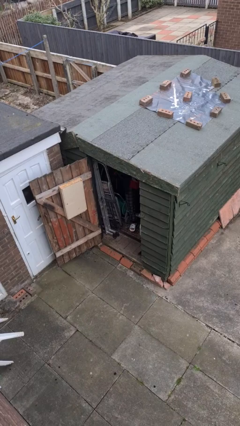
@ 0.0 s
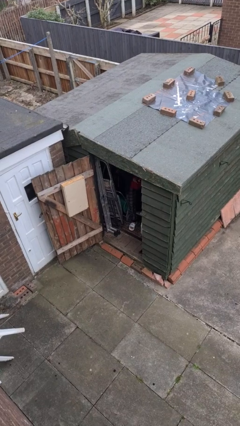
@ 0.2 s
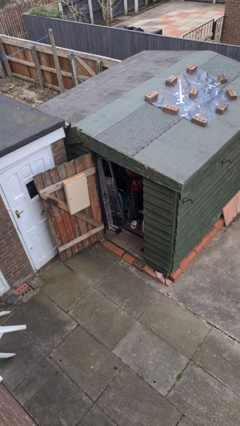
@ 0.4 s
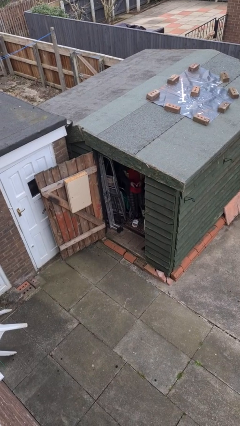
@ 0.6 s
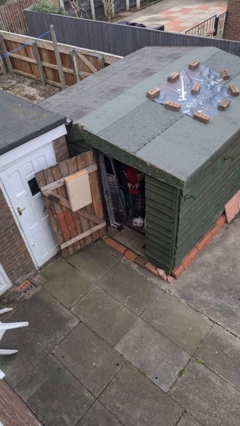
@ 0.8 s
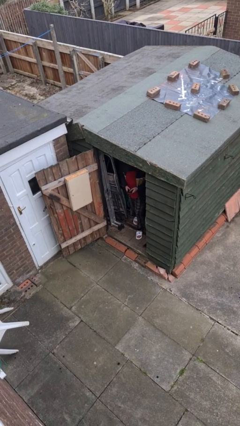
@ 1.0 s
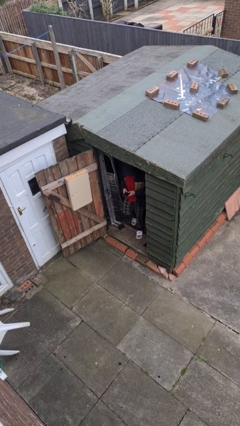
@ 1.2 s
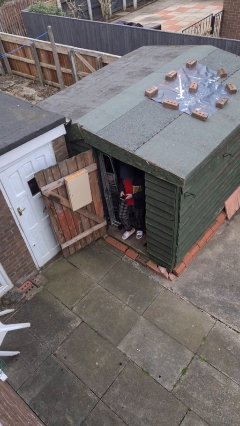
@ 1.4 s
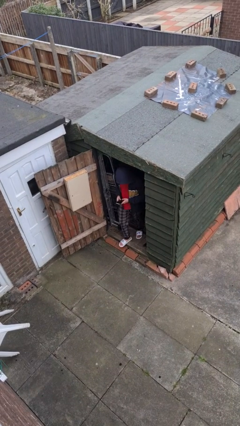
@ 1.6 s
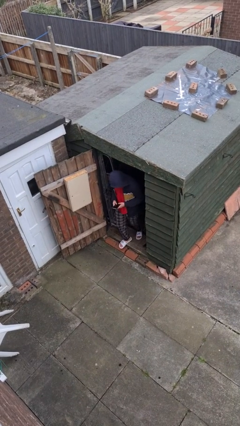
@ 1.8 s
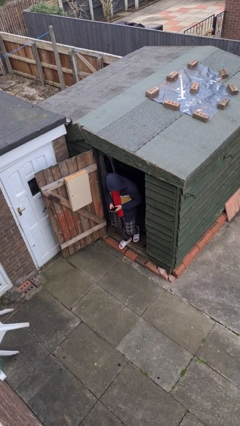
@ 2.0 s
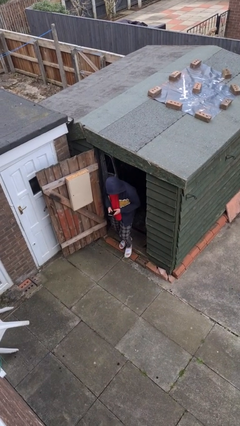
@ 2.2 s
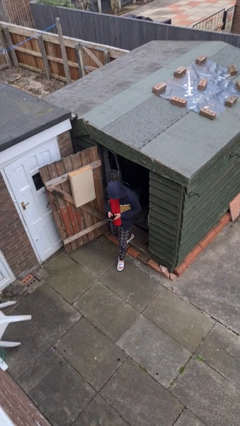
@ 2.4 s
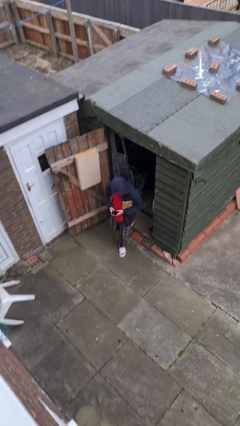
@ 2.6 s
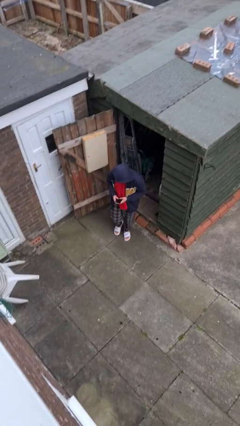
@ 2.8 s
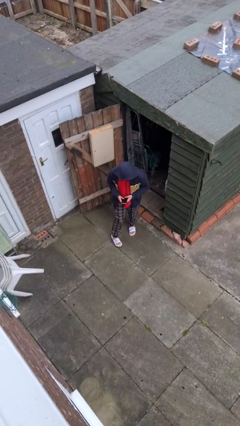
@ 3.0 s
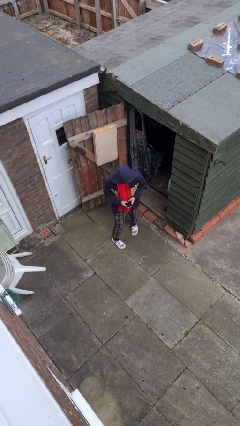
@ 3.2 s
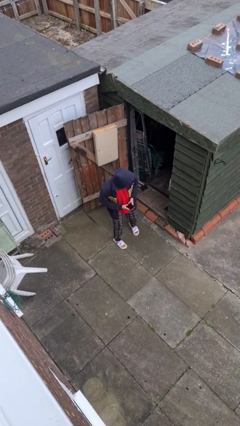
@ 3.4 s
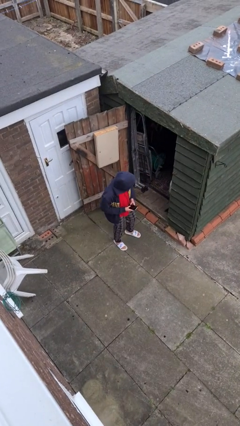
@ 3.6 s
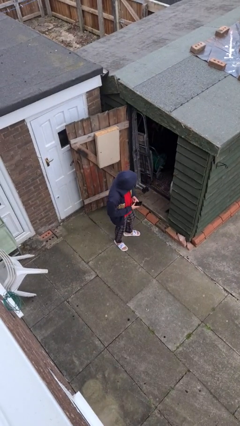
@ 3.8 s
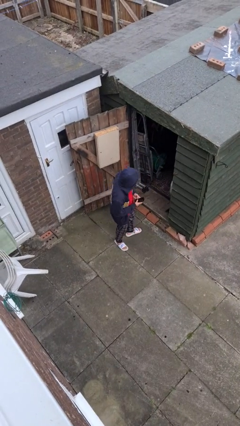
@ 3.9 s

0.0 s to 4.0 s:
person enters scene through structure

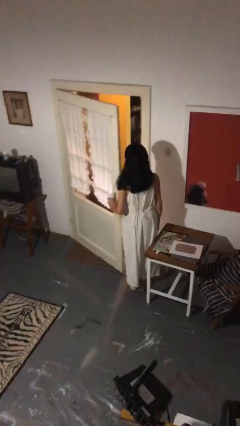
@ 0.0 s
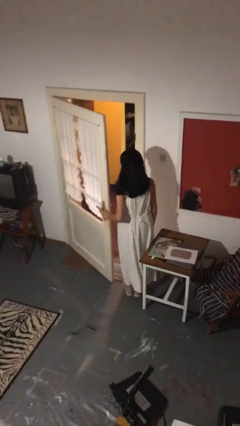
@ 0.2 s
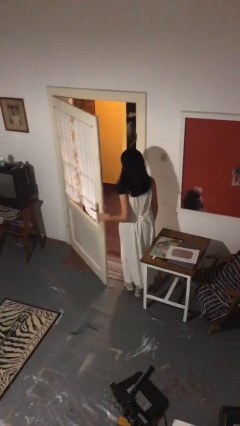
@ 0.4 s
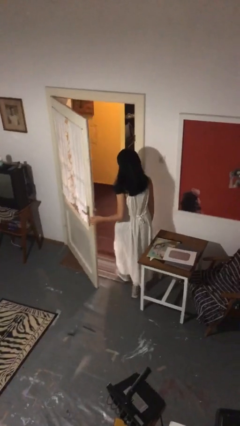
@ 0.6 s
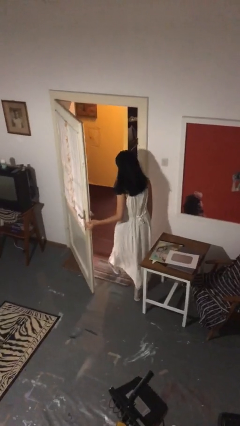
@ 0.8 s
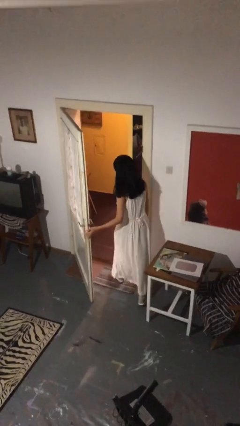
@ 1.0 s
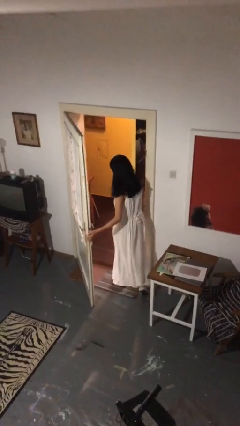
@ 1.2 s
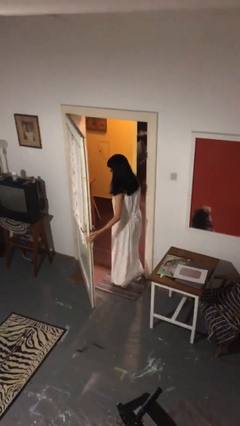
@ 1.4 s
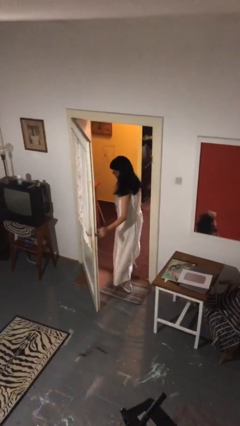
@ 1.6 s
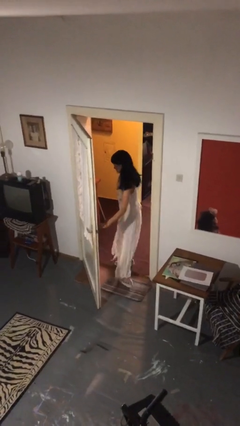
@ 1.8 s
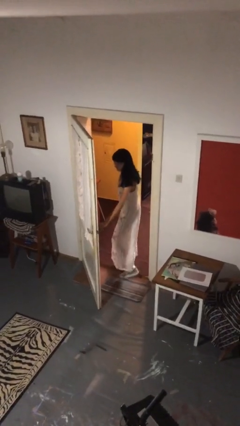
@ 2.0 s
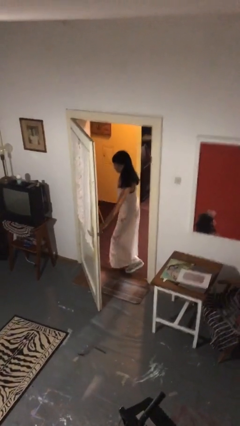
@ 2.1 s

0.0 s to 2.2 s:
person exits scene through structure

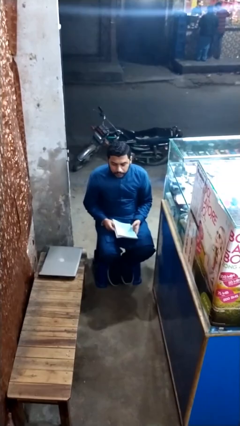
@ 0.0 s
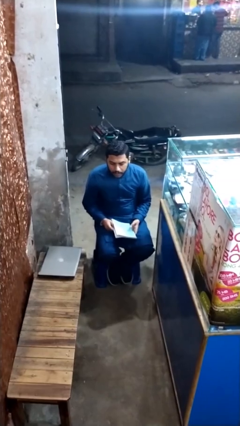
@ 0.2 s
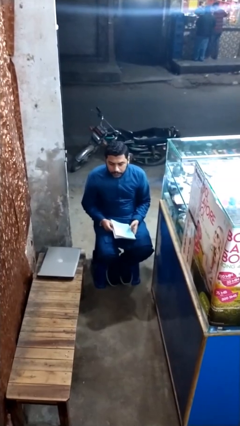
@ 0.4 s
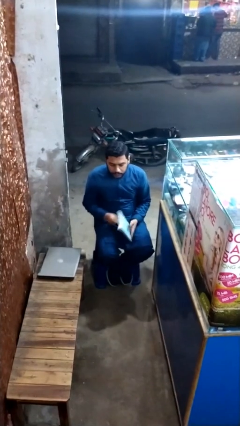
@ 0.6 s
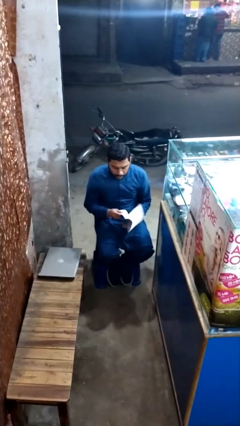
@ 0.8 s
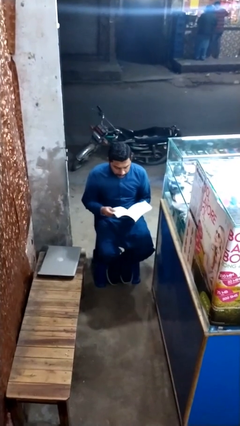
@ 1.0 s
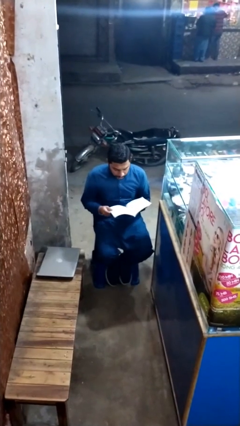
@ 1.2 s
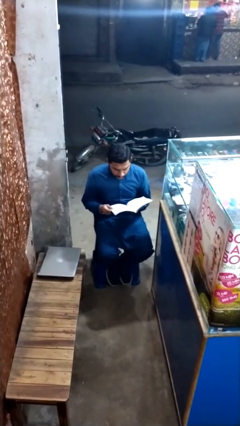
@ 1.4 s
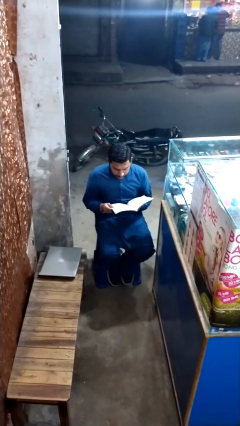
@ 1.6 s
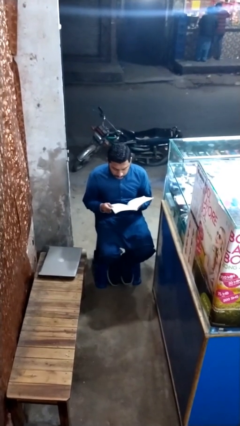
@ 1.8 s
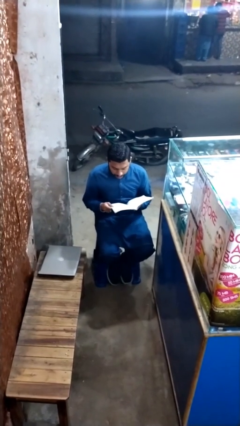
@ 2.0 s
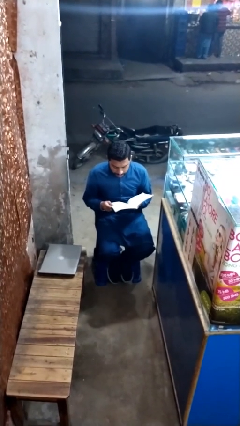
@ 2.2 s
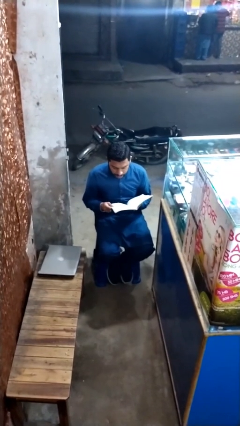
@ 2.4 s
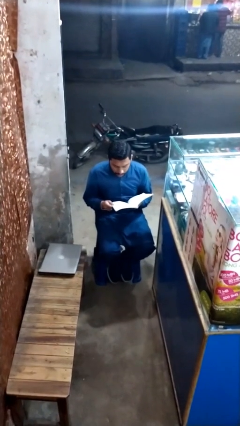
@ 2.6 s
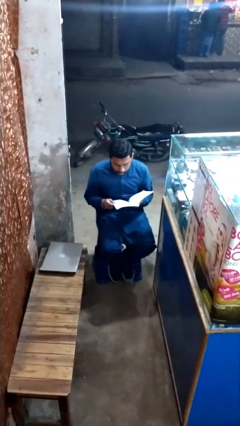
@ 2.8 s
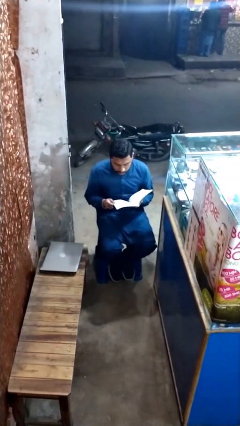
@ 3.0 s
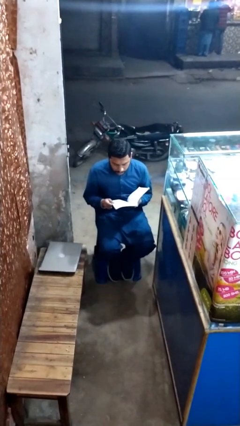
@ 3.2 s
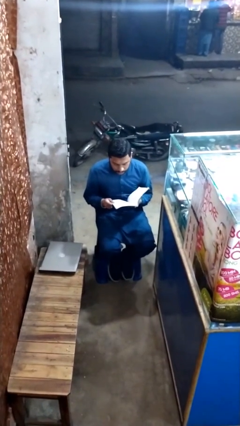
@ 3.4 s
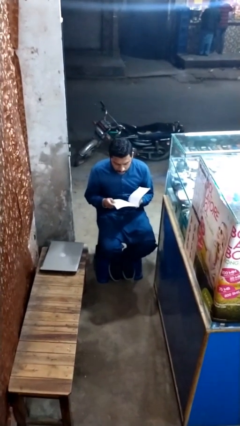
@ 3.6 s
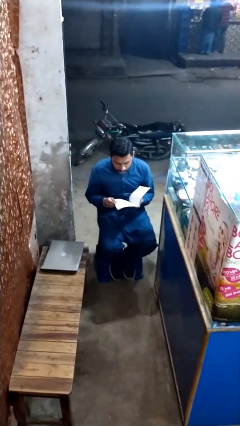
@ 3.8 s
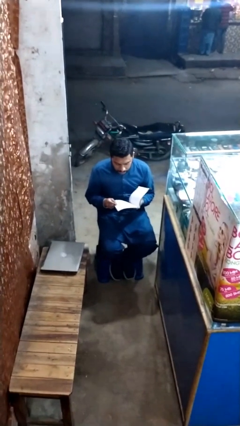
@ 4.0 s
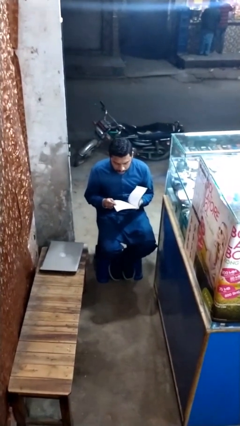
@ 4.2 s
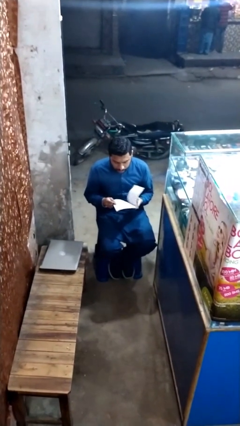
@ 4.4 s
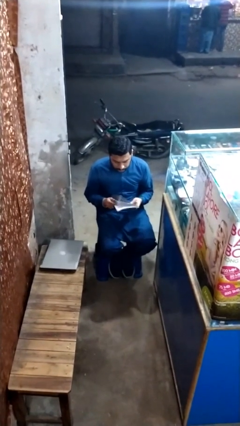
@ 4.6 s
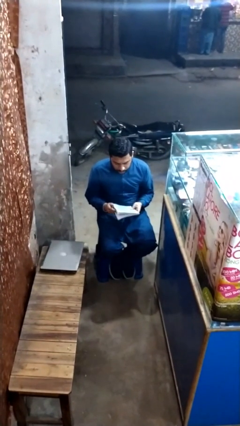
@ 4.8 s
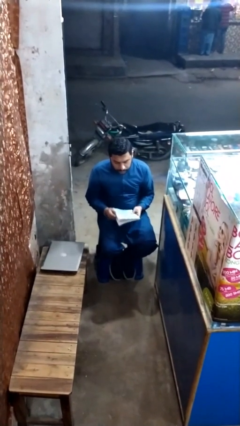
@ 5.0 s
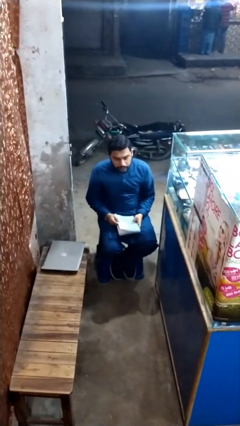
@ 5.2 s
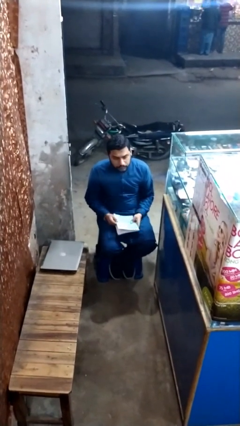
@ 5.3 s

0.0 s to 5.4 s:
person reads document

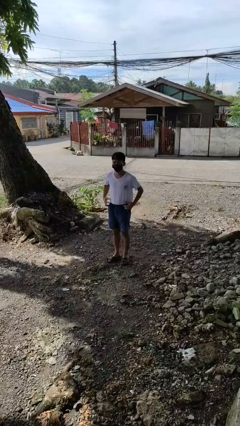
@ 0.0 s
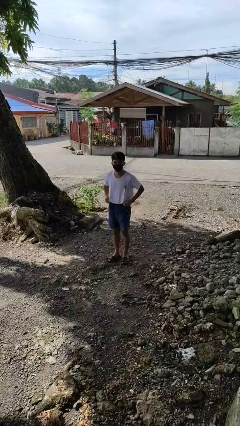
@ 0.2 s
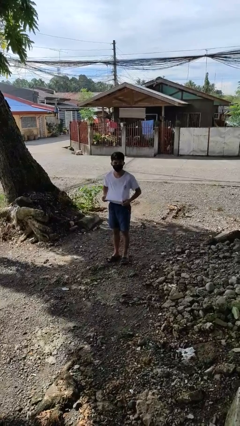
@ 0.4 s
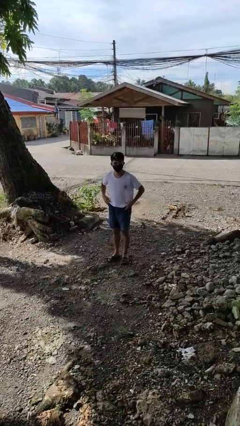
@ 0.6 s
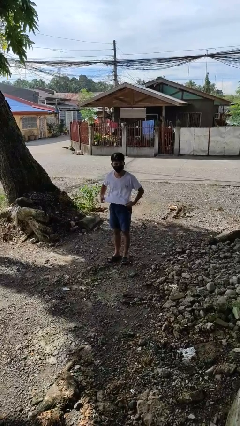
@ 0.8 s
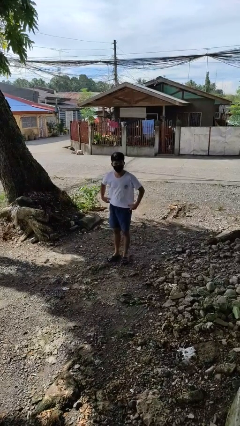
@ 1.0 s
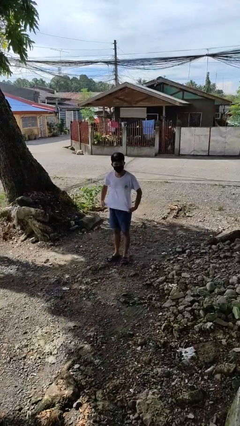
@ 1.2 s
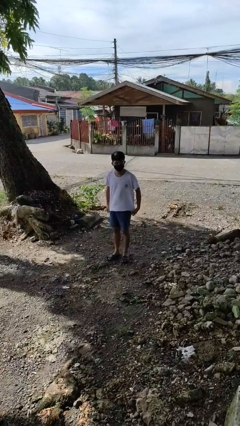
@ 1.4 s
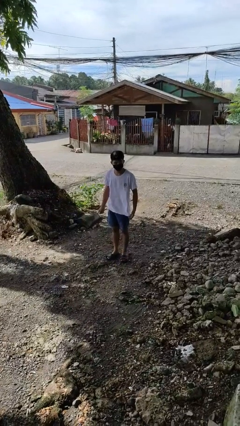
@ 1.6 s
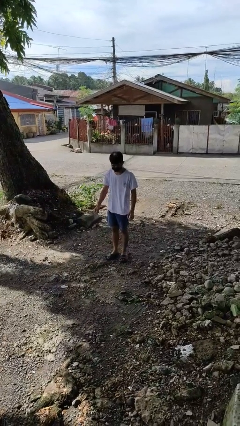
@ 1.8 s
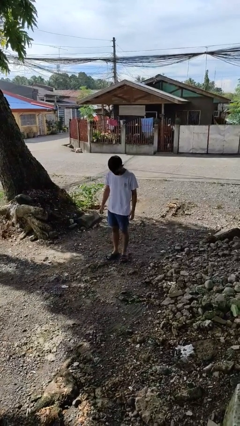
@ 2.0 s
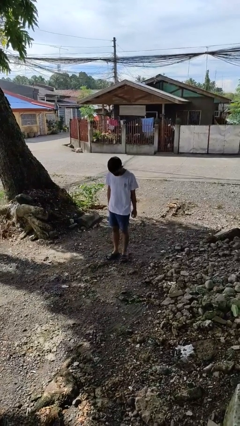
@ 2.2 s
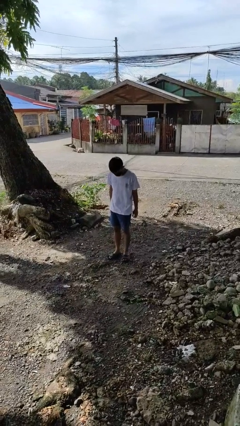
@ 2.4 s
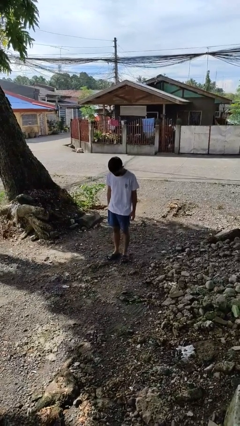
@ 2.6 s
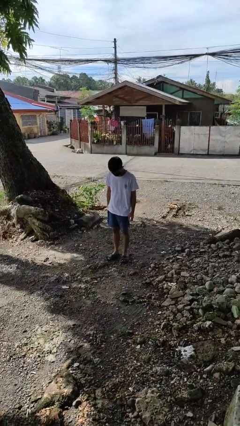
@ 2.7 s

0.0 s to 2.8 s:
person untucks shirt

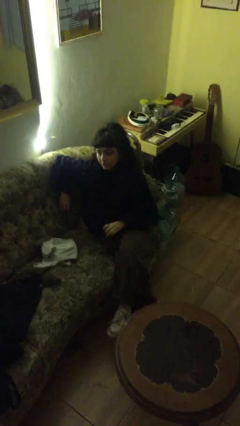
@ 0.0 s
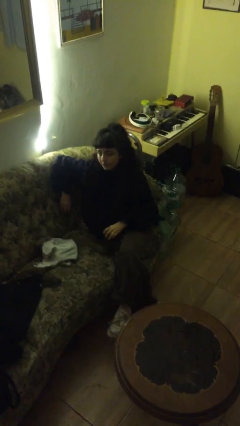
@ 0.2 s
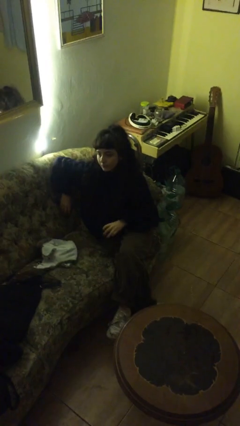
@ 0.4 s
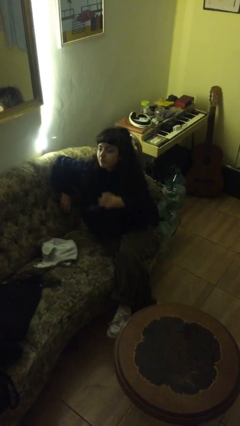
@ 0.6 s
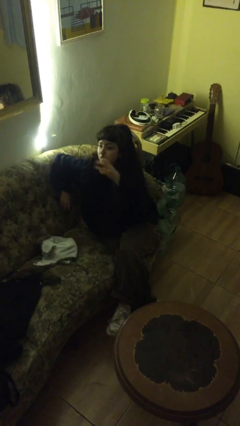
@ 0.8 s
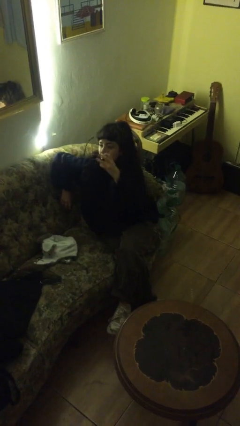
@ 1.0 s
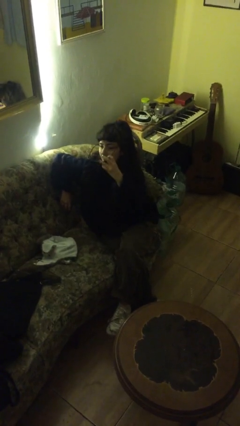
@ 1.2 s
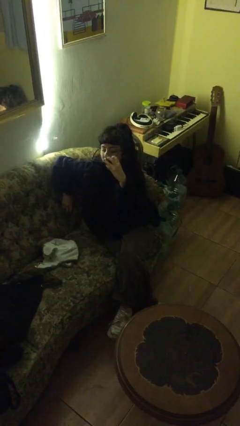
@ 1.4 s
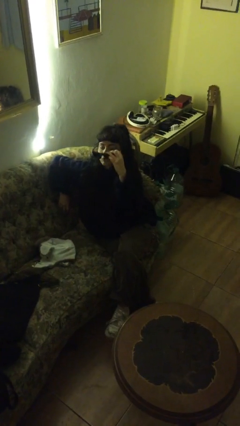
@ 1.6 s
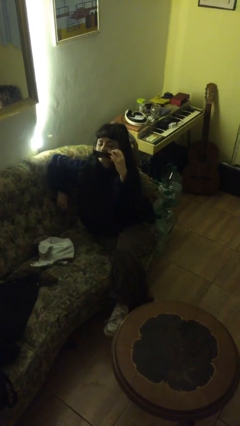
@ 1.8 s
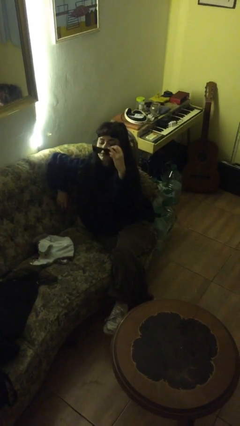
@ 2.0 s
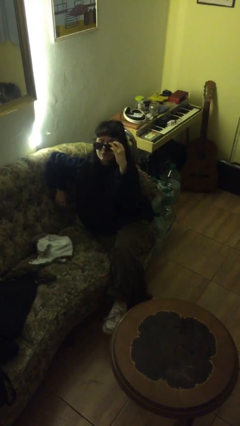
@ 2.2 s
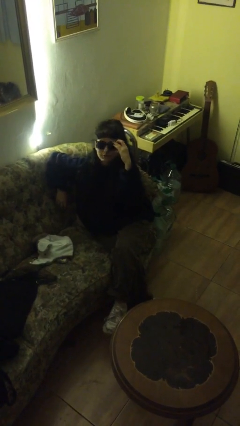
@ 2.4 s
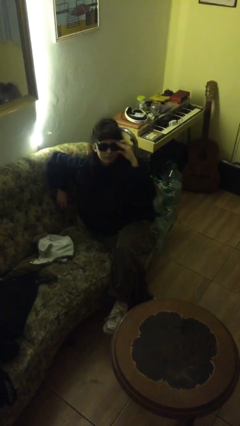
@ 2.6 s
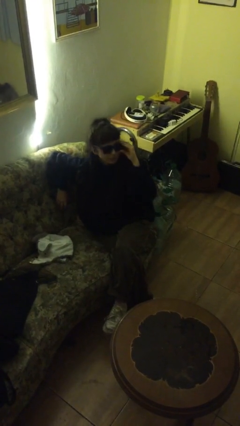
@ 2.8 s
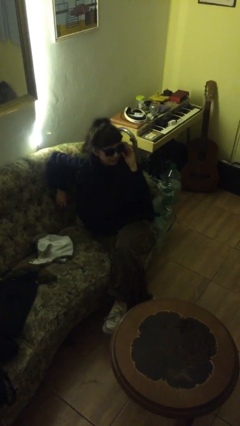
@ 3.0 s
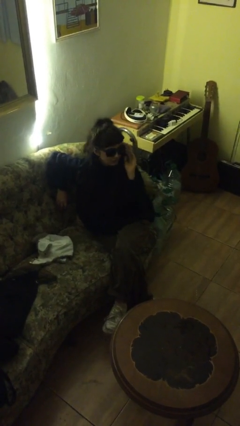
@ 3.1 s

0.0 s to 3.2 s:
person puts on sunglasses
